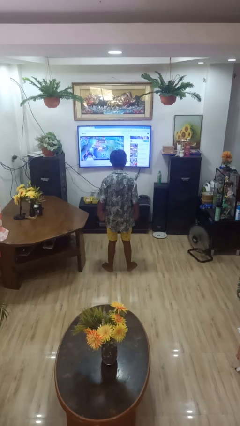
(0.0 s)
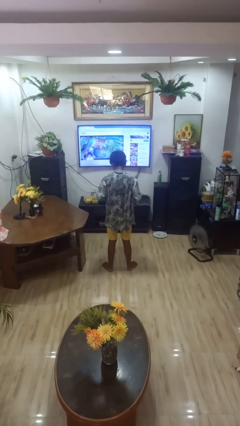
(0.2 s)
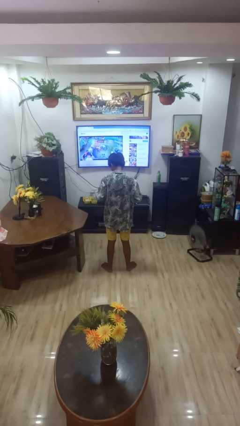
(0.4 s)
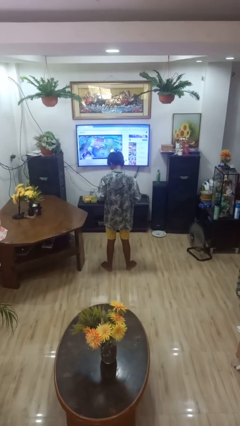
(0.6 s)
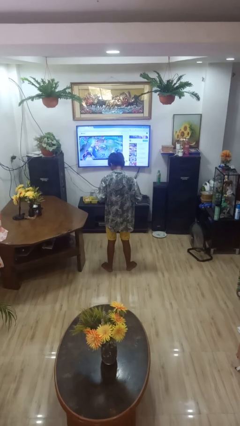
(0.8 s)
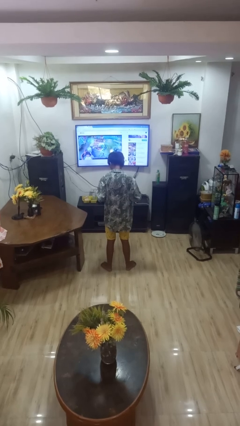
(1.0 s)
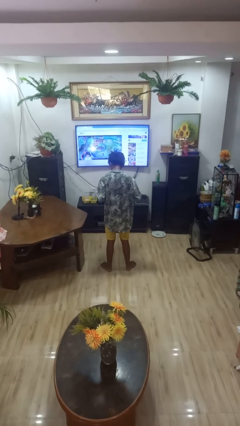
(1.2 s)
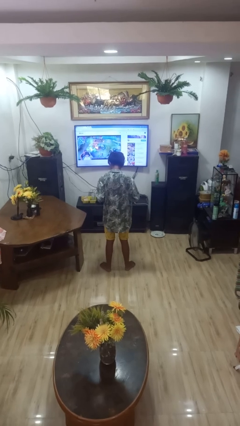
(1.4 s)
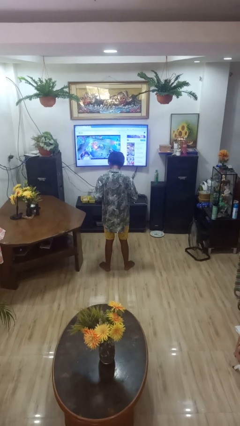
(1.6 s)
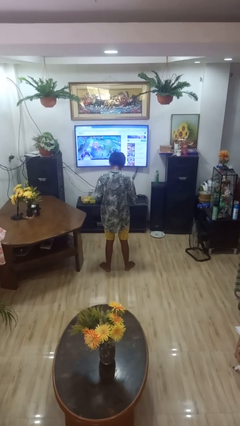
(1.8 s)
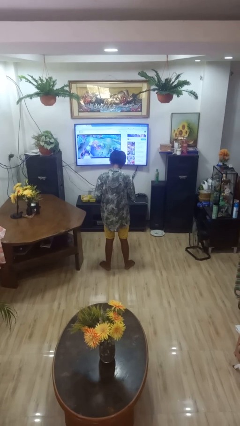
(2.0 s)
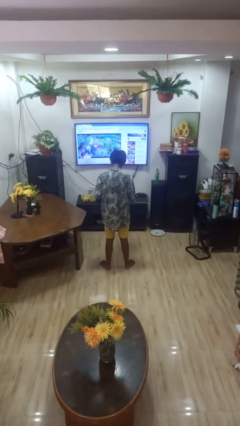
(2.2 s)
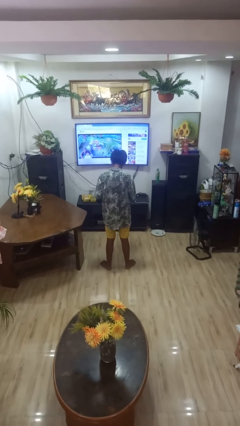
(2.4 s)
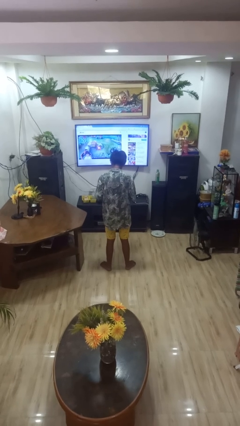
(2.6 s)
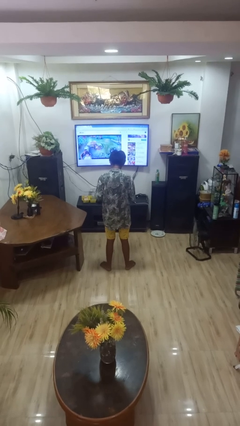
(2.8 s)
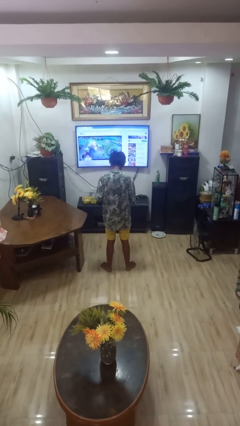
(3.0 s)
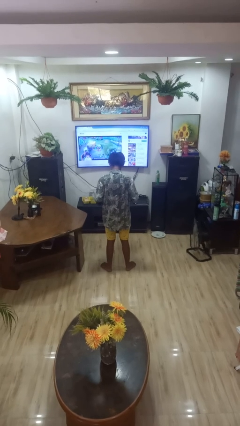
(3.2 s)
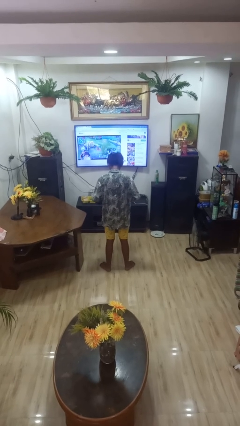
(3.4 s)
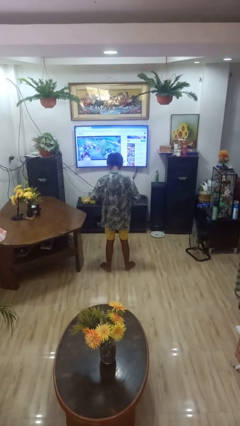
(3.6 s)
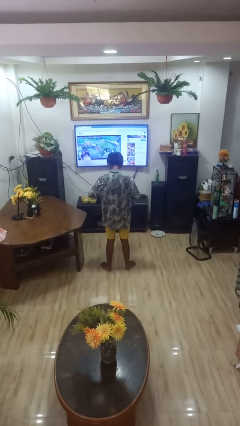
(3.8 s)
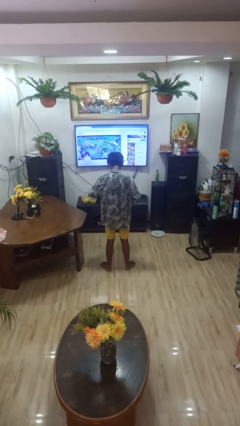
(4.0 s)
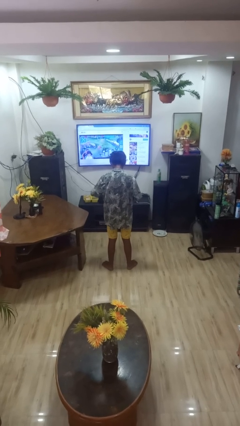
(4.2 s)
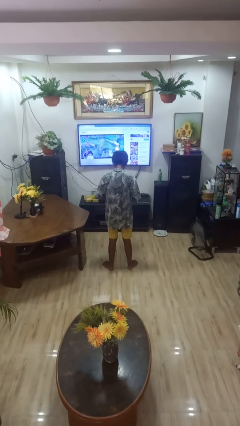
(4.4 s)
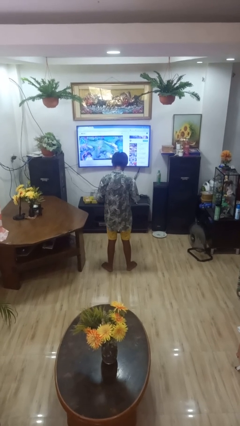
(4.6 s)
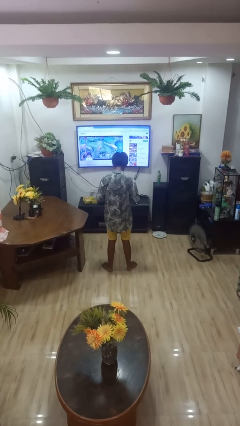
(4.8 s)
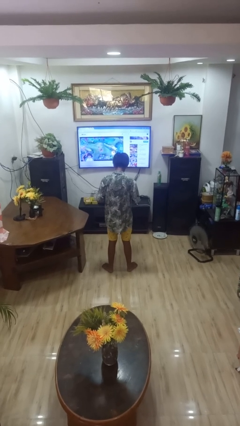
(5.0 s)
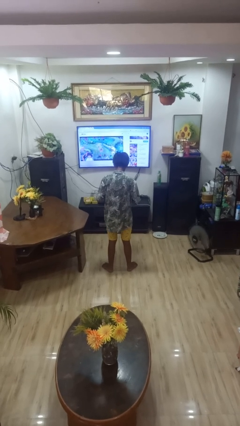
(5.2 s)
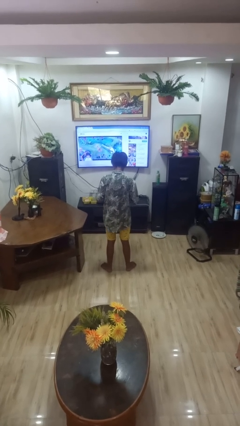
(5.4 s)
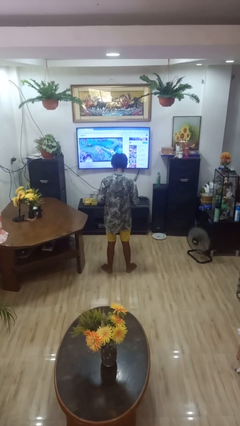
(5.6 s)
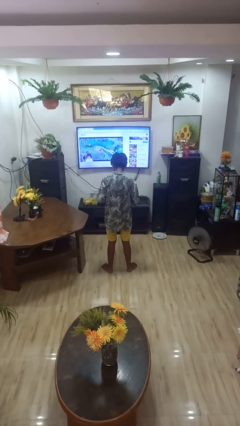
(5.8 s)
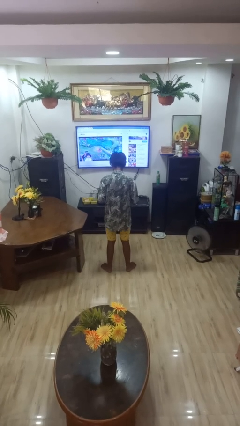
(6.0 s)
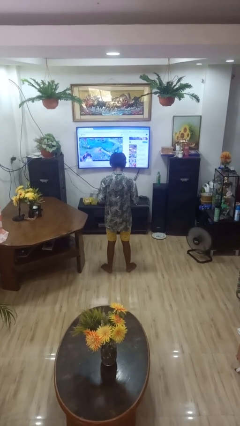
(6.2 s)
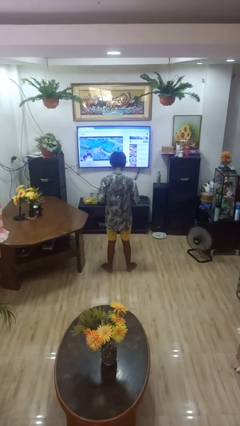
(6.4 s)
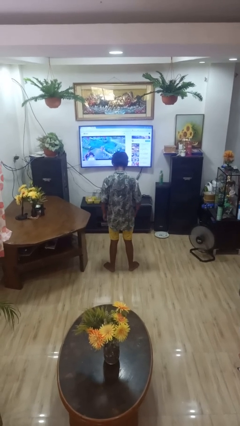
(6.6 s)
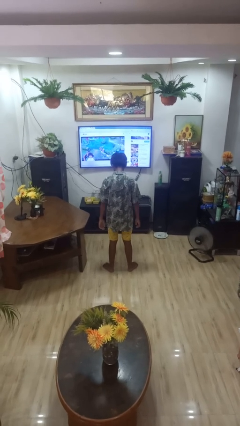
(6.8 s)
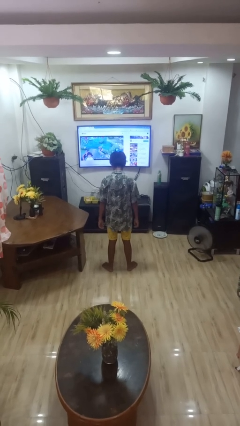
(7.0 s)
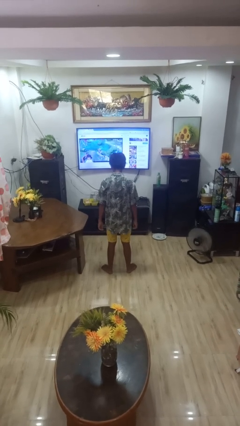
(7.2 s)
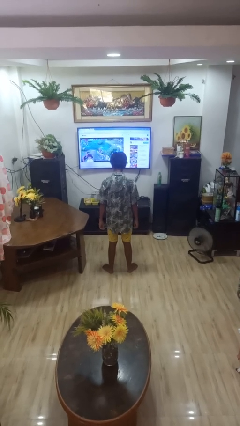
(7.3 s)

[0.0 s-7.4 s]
person buttons shirt

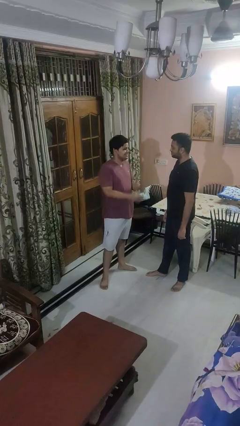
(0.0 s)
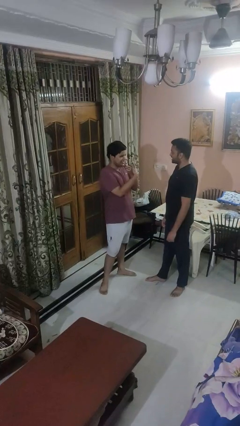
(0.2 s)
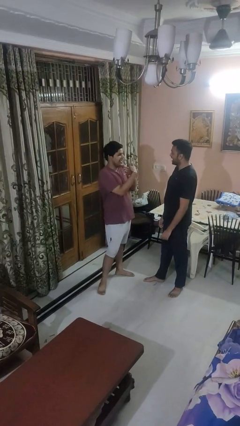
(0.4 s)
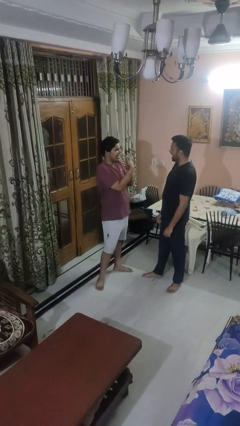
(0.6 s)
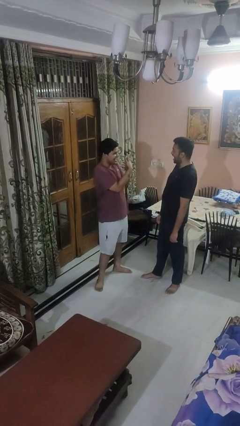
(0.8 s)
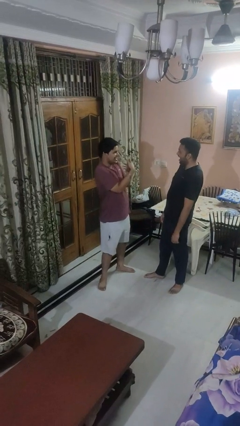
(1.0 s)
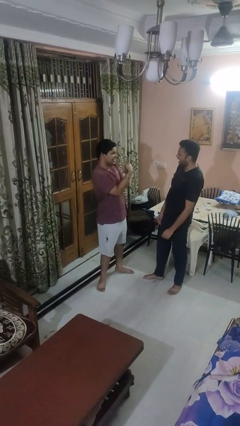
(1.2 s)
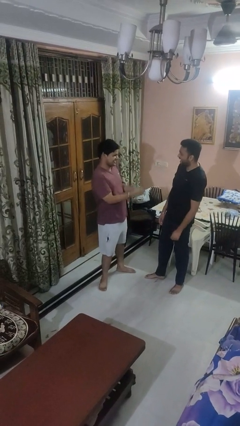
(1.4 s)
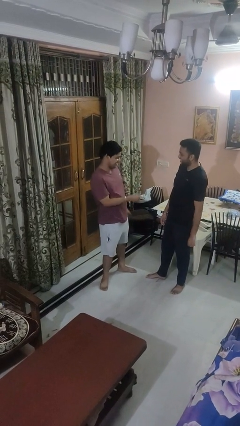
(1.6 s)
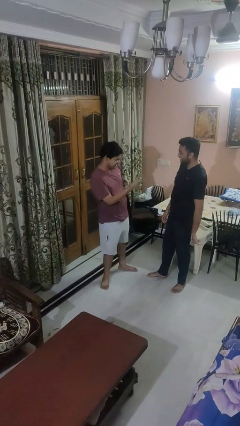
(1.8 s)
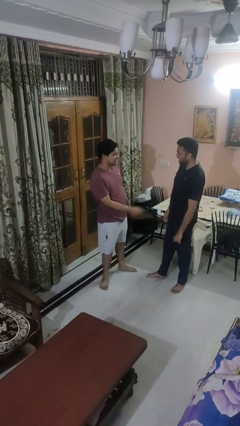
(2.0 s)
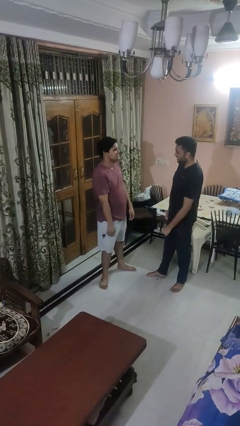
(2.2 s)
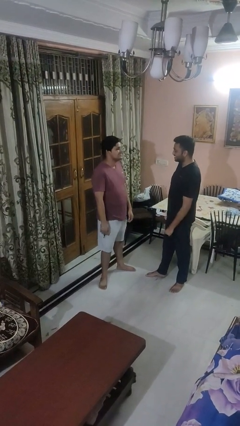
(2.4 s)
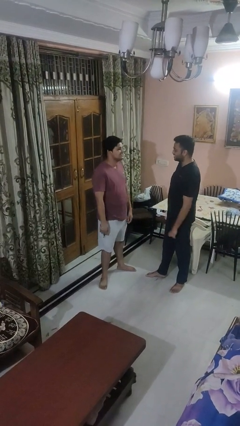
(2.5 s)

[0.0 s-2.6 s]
person laughs with person

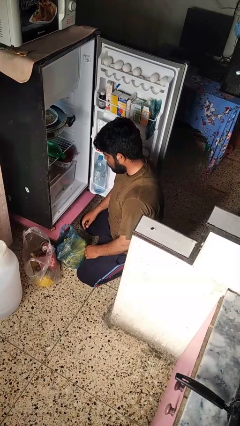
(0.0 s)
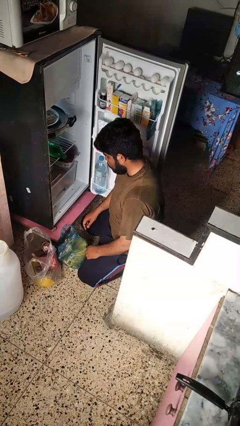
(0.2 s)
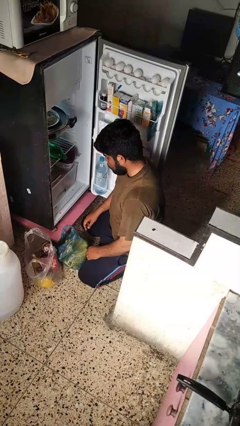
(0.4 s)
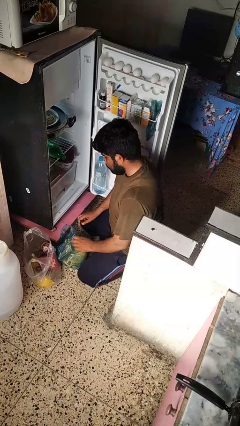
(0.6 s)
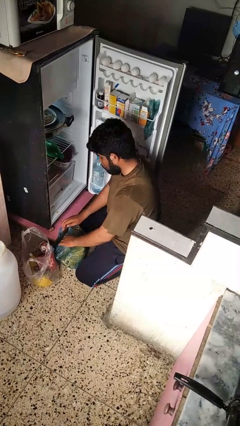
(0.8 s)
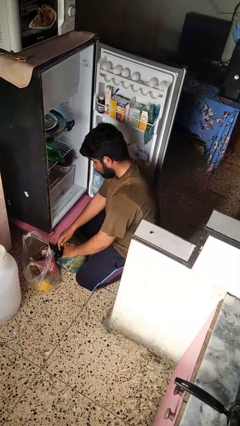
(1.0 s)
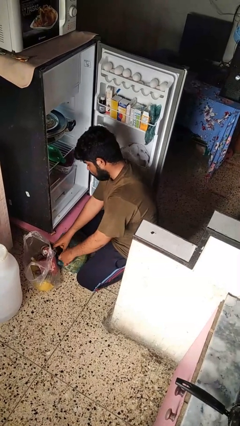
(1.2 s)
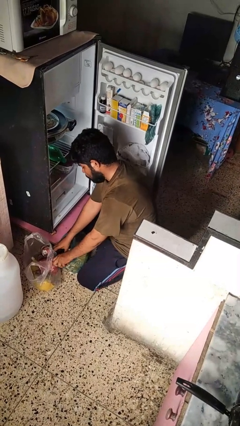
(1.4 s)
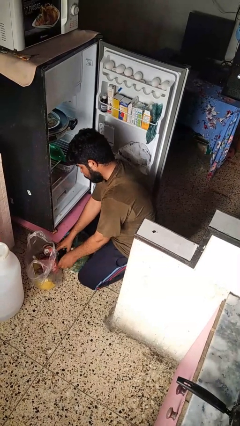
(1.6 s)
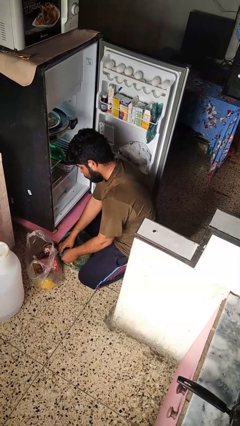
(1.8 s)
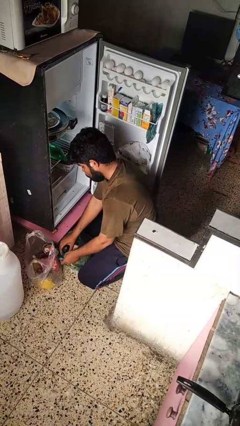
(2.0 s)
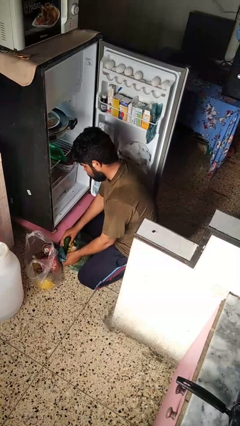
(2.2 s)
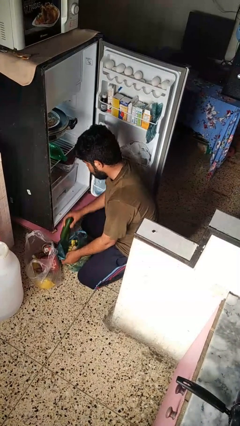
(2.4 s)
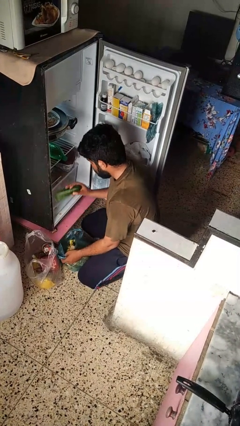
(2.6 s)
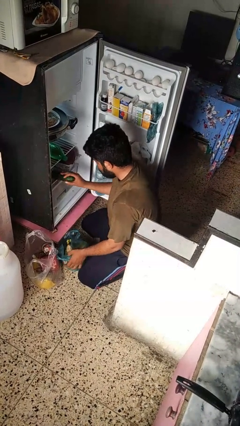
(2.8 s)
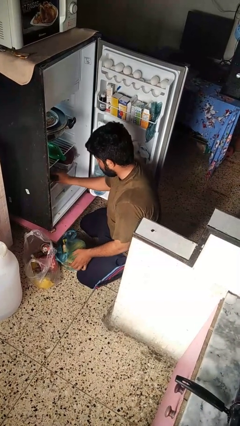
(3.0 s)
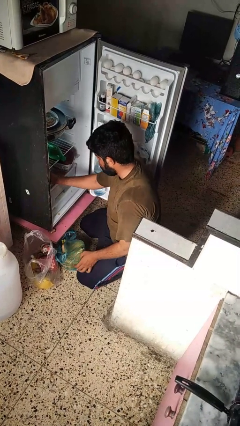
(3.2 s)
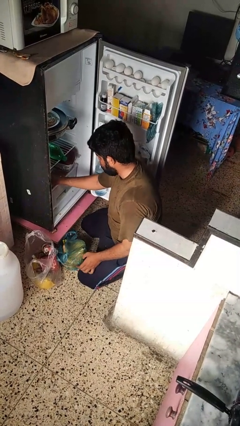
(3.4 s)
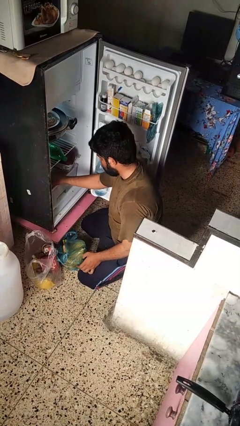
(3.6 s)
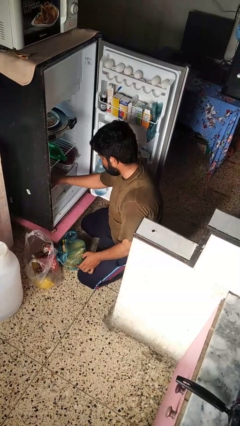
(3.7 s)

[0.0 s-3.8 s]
person loads groceries into refrigerator

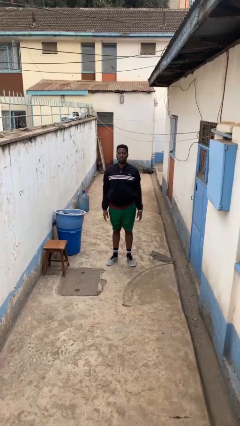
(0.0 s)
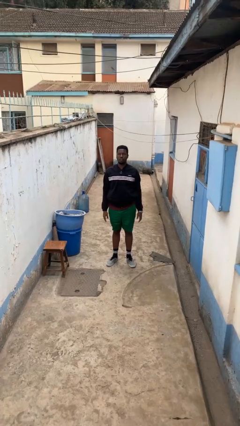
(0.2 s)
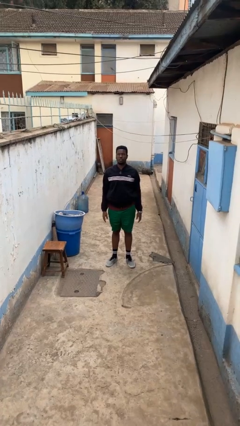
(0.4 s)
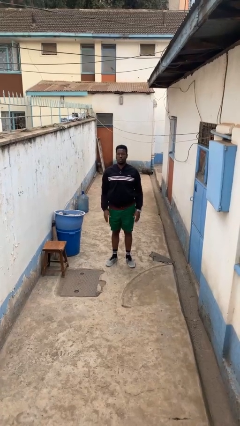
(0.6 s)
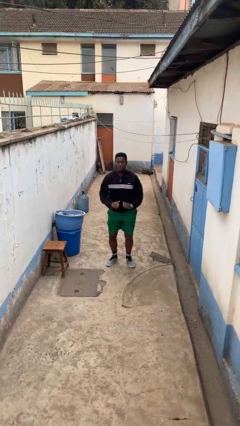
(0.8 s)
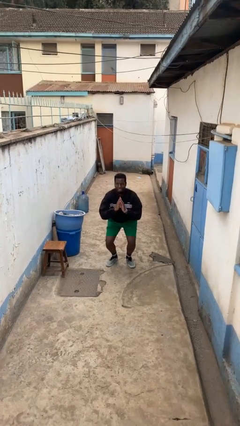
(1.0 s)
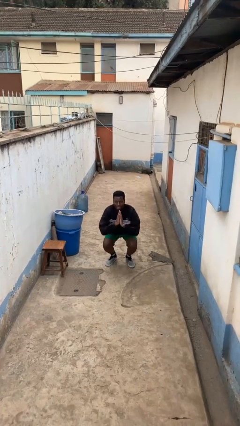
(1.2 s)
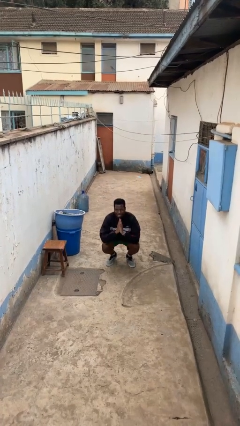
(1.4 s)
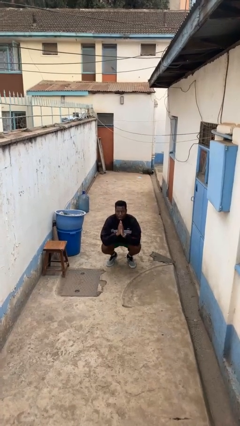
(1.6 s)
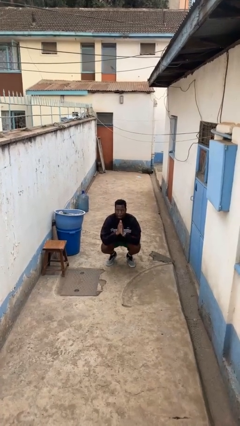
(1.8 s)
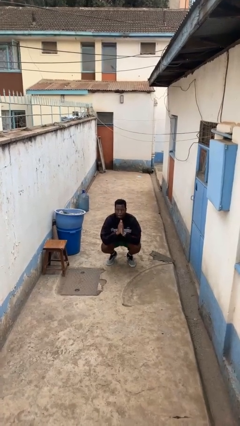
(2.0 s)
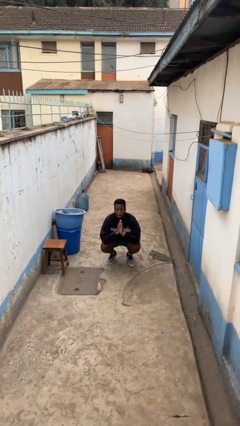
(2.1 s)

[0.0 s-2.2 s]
person squats

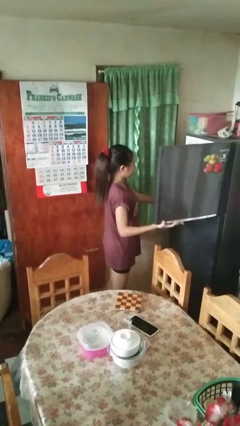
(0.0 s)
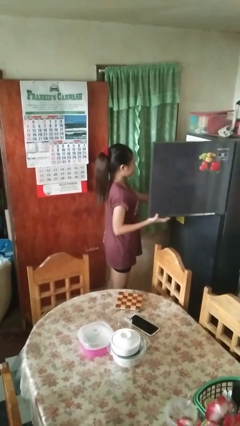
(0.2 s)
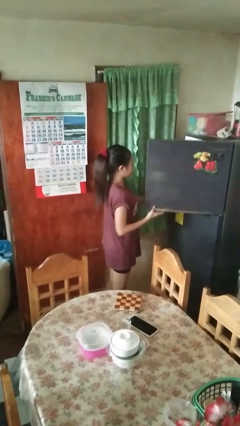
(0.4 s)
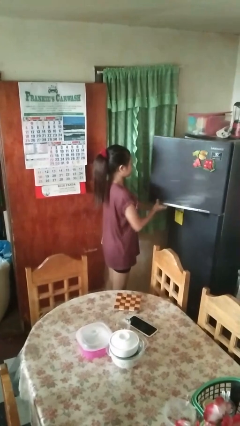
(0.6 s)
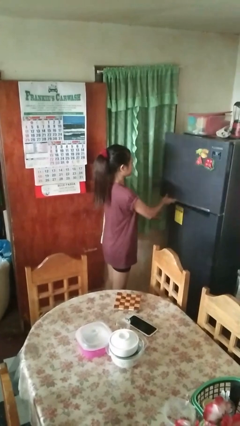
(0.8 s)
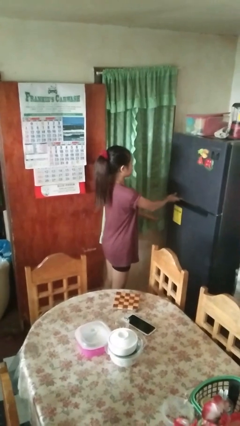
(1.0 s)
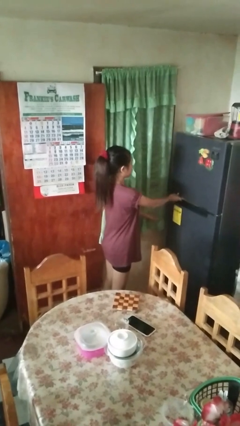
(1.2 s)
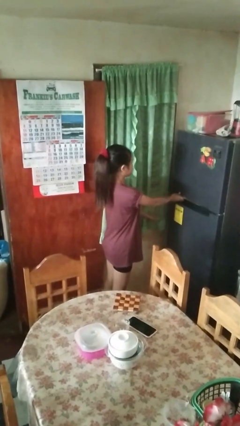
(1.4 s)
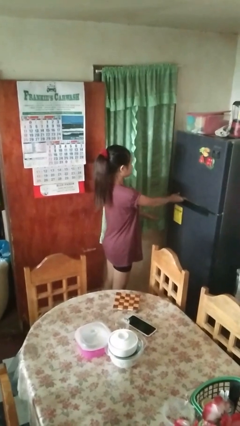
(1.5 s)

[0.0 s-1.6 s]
person closes refrigerator

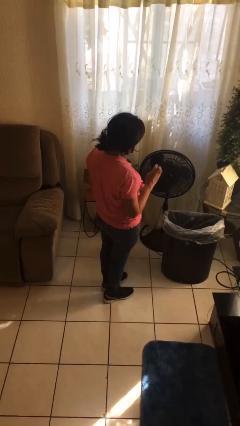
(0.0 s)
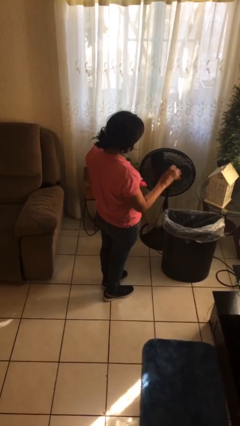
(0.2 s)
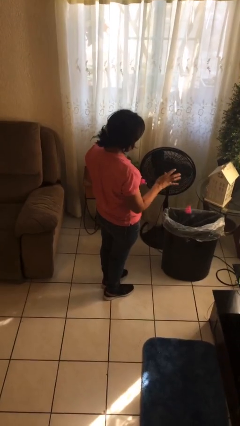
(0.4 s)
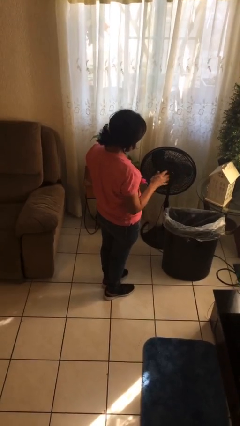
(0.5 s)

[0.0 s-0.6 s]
person discards trash
